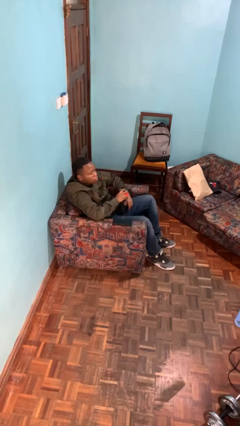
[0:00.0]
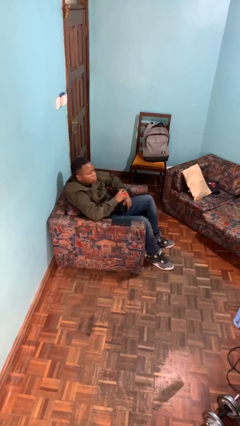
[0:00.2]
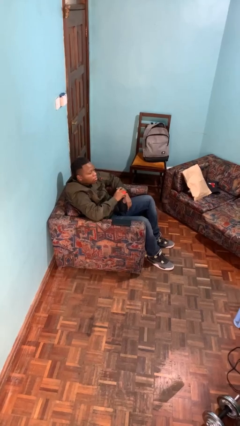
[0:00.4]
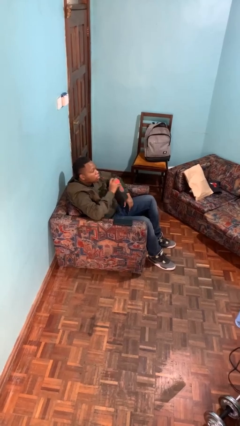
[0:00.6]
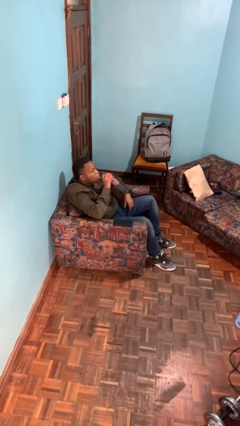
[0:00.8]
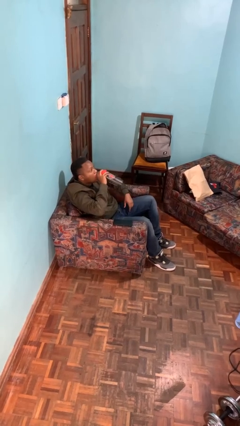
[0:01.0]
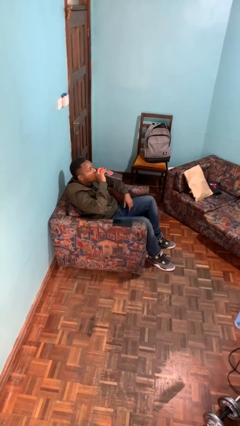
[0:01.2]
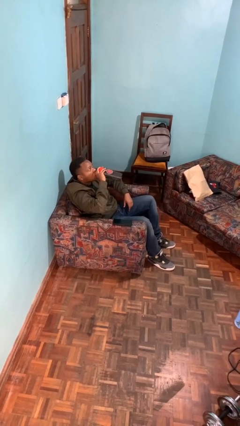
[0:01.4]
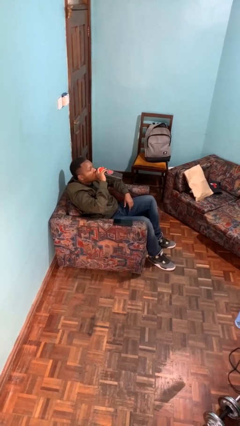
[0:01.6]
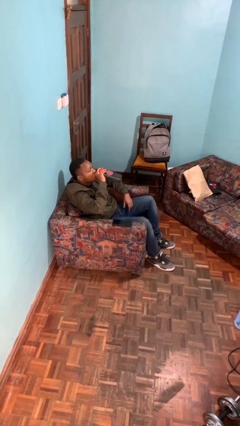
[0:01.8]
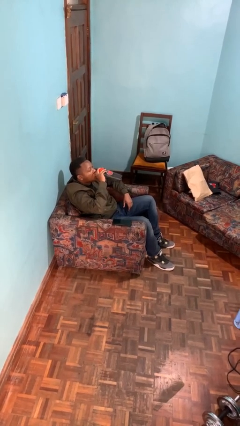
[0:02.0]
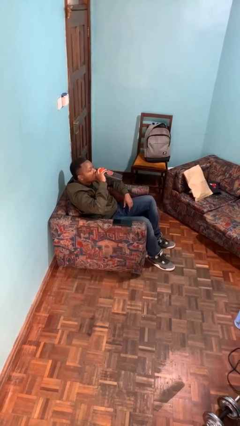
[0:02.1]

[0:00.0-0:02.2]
person drinks from bottle

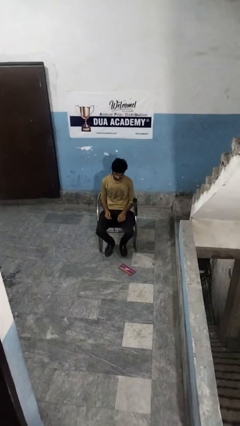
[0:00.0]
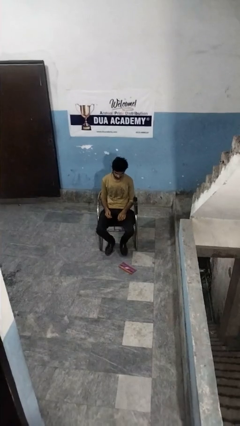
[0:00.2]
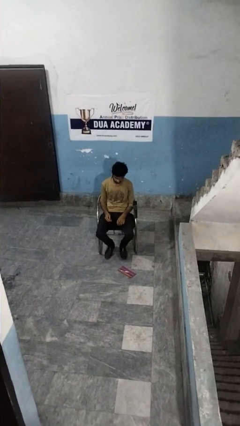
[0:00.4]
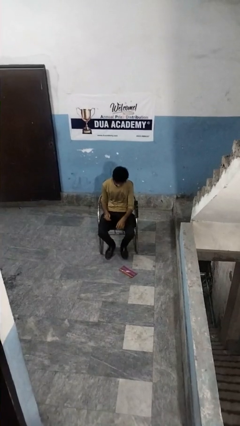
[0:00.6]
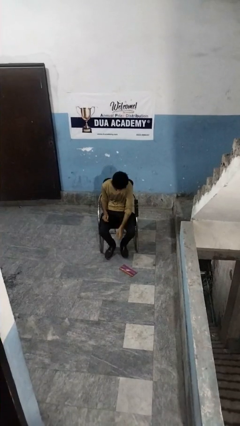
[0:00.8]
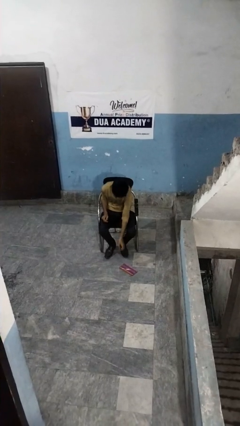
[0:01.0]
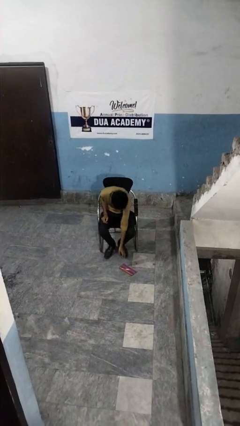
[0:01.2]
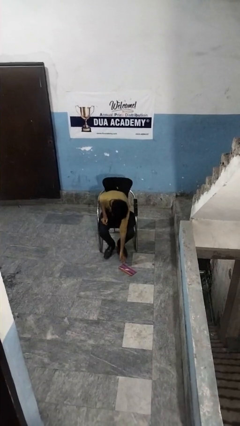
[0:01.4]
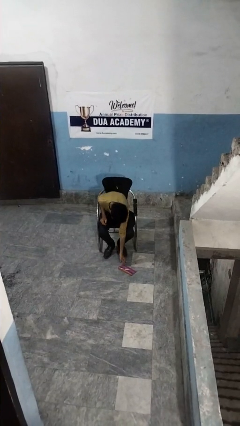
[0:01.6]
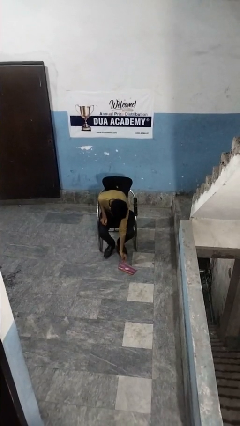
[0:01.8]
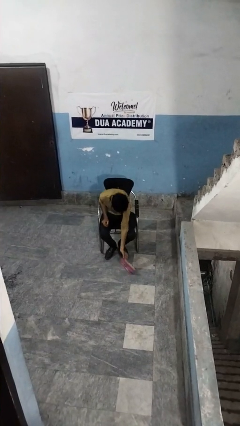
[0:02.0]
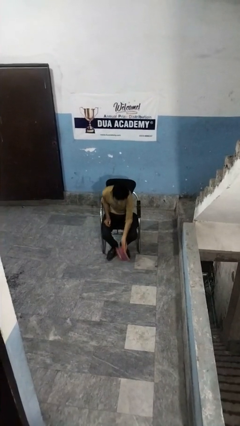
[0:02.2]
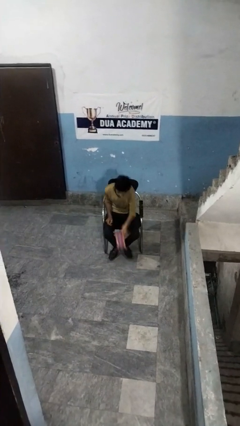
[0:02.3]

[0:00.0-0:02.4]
person picks up object from floor

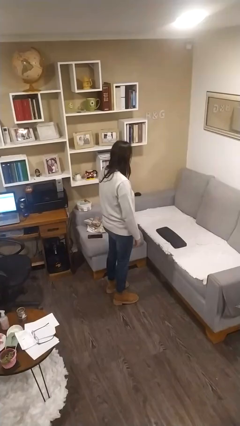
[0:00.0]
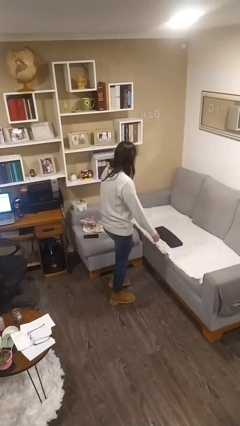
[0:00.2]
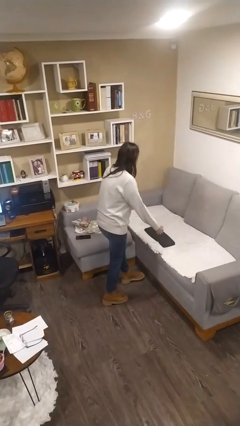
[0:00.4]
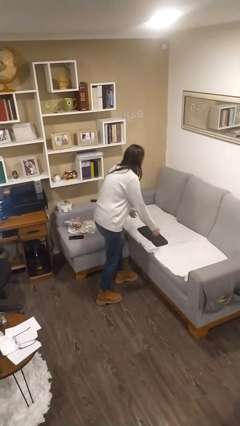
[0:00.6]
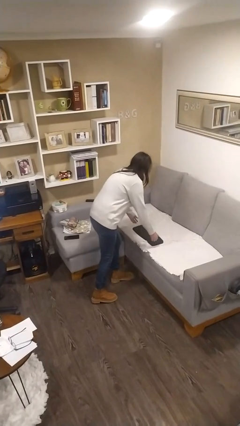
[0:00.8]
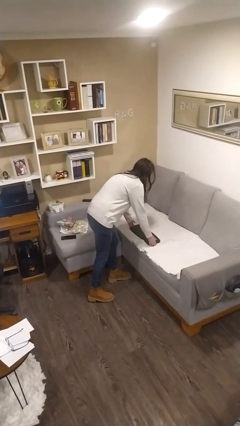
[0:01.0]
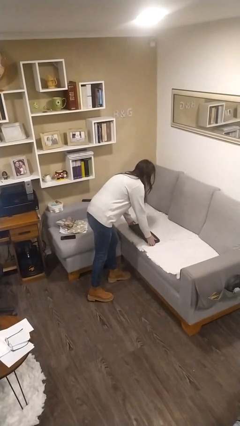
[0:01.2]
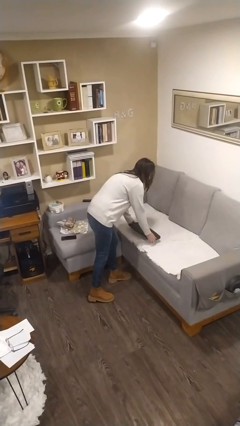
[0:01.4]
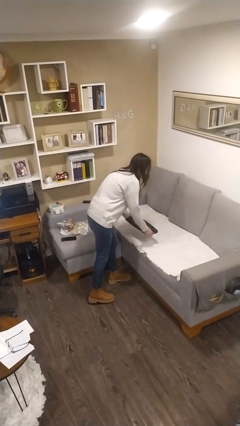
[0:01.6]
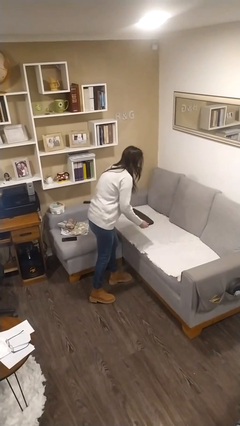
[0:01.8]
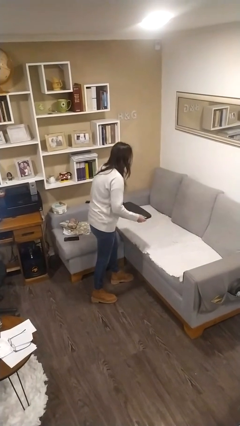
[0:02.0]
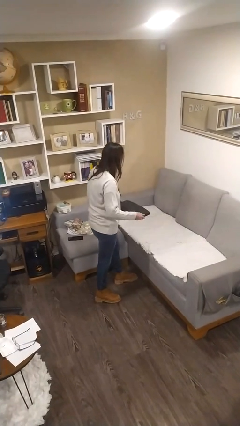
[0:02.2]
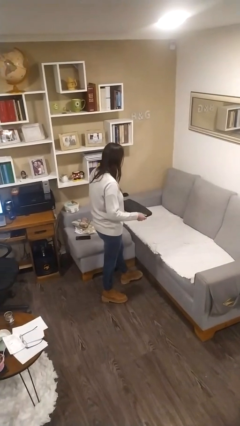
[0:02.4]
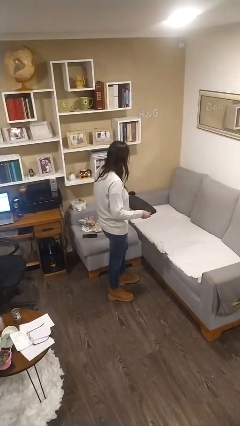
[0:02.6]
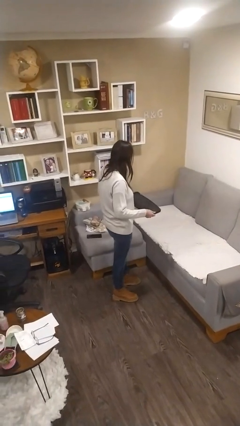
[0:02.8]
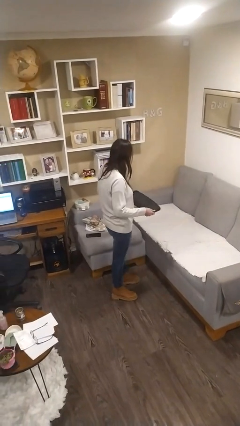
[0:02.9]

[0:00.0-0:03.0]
person picks up object from couch

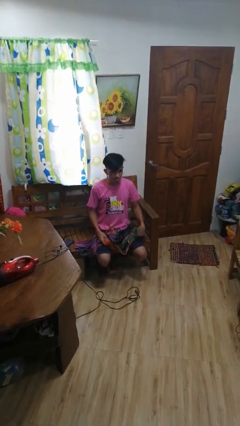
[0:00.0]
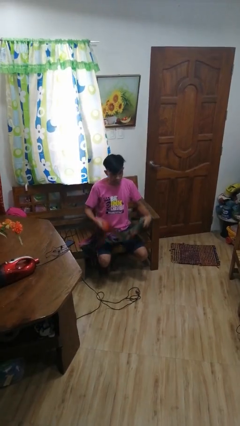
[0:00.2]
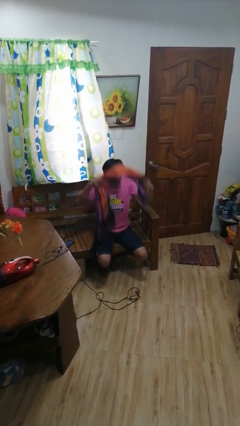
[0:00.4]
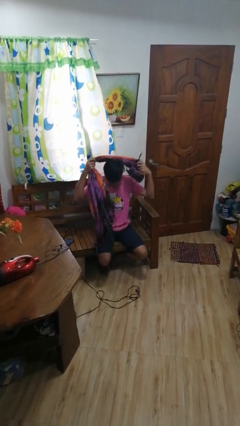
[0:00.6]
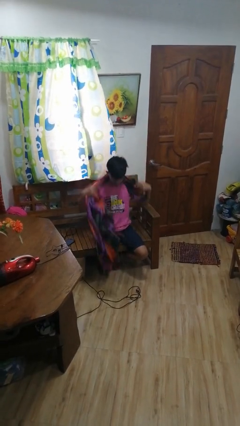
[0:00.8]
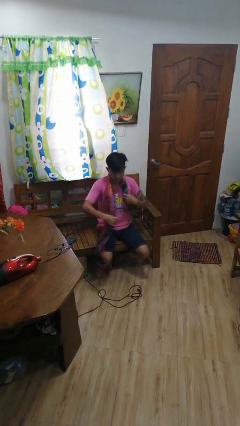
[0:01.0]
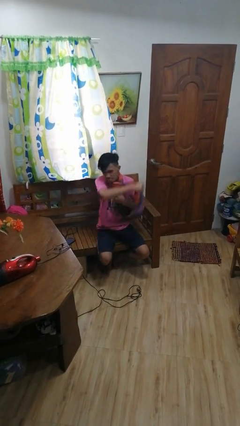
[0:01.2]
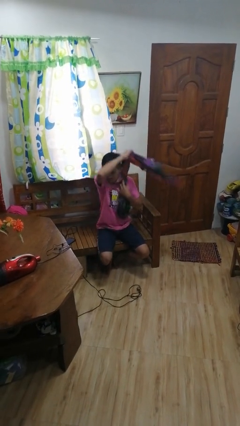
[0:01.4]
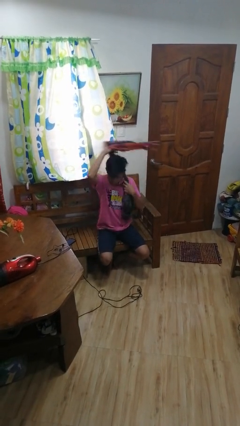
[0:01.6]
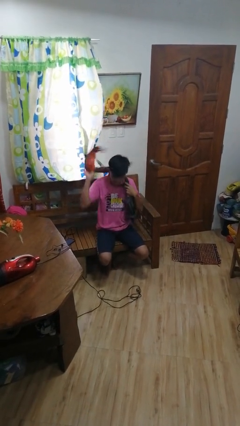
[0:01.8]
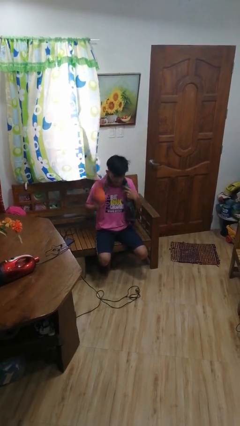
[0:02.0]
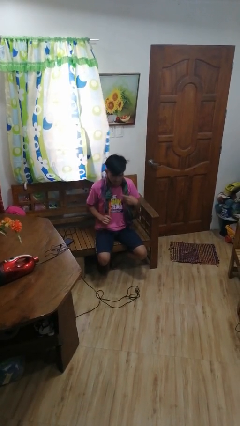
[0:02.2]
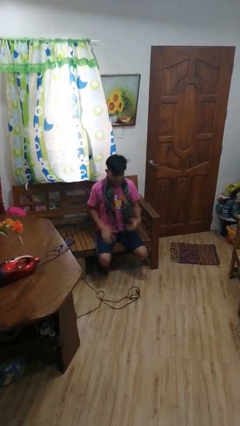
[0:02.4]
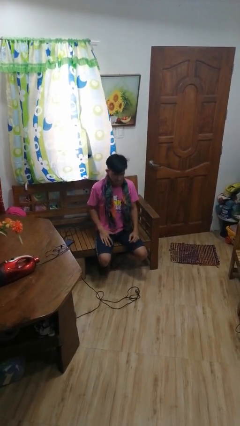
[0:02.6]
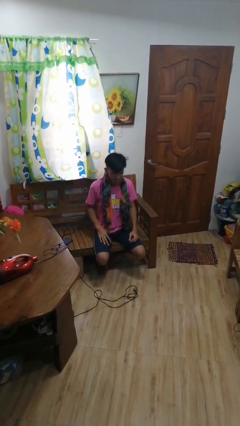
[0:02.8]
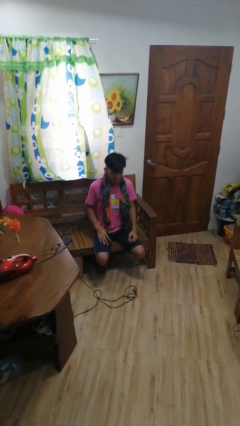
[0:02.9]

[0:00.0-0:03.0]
person puts on scarf

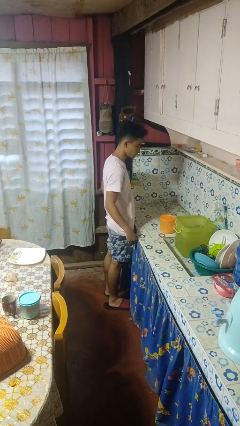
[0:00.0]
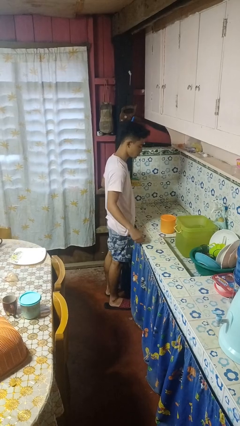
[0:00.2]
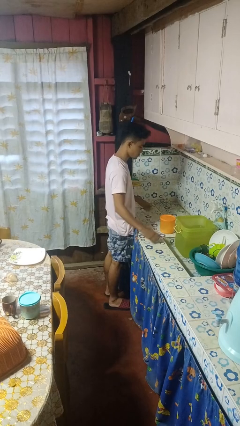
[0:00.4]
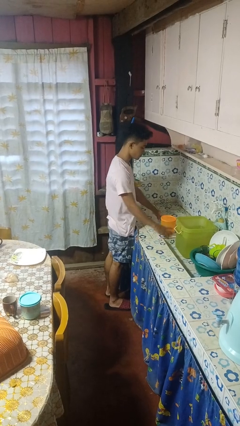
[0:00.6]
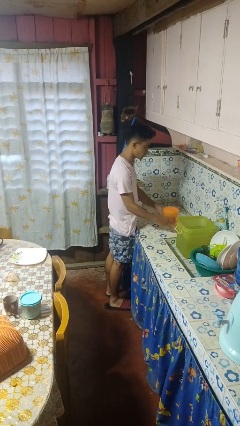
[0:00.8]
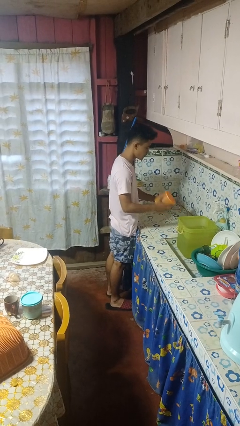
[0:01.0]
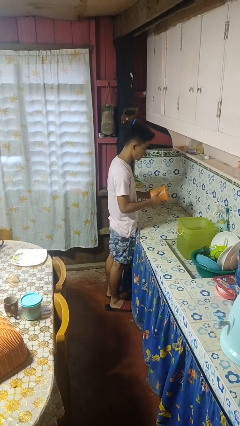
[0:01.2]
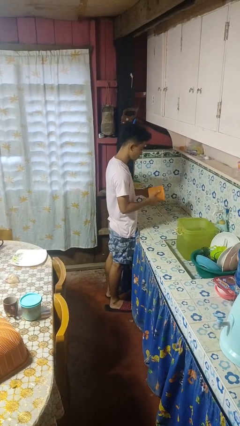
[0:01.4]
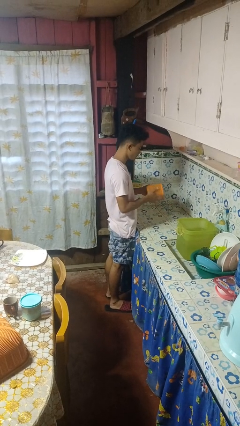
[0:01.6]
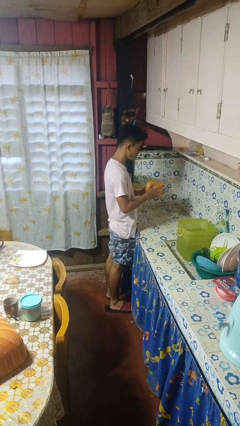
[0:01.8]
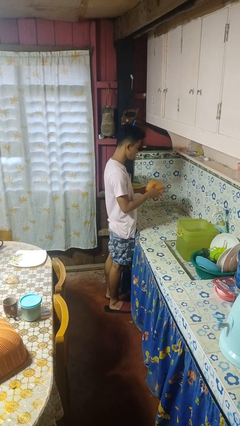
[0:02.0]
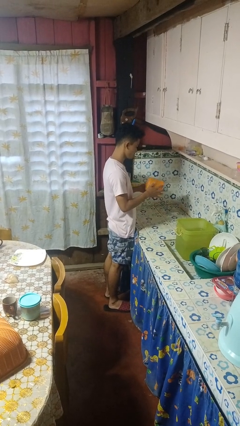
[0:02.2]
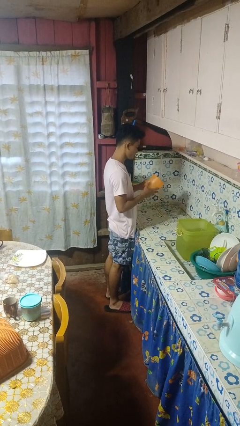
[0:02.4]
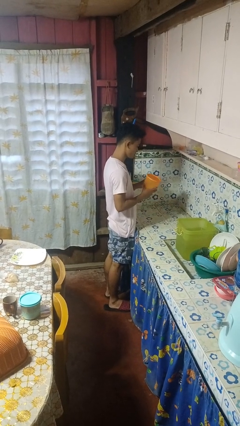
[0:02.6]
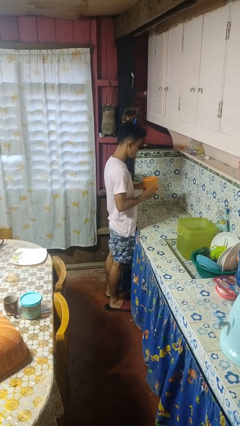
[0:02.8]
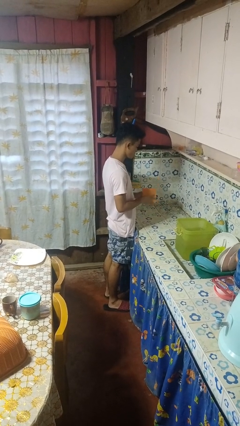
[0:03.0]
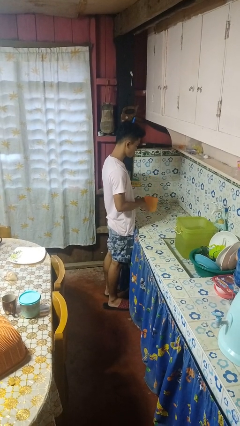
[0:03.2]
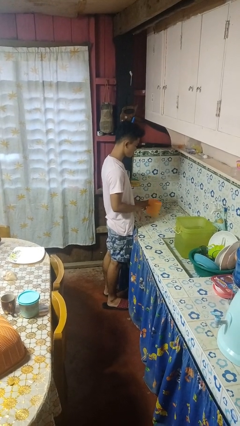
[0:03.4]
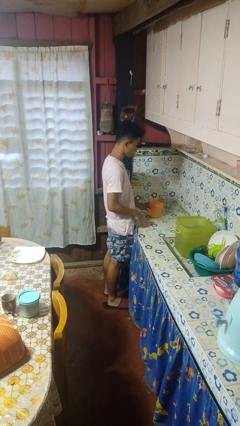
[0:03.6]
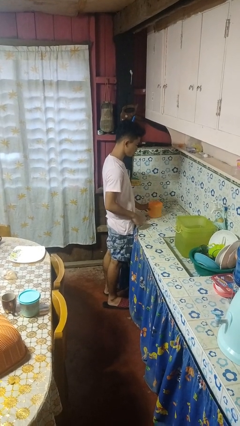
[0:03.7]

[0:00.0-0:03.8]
person picks up object from countertop

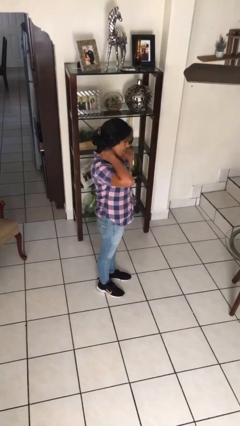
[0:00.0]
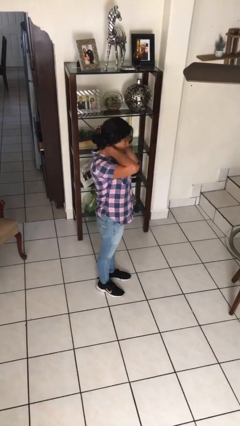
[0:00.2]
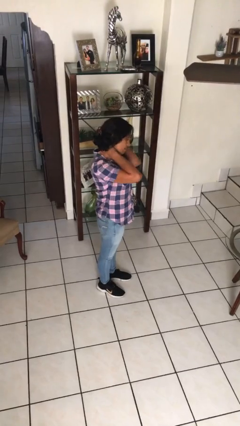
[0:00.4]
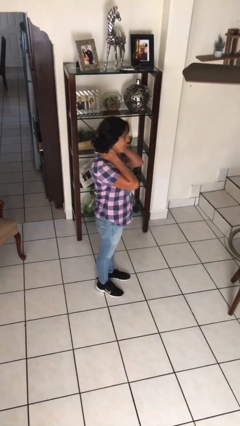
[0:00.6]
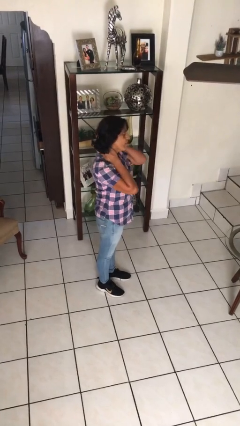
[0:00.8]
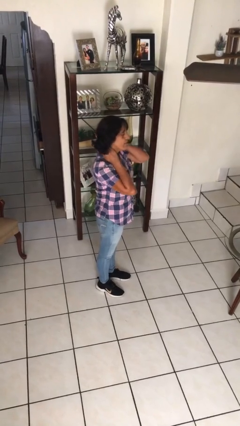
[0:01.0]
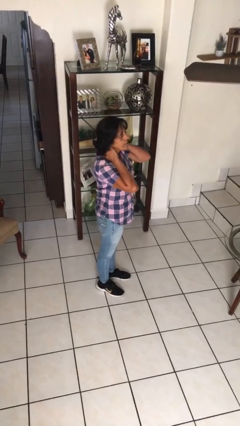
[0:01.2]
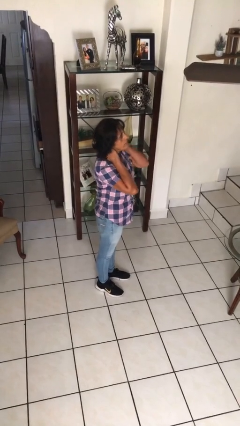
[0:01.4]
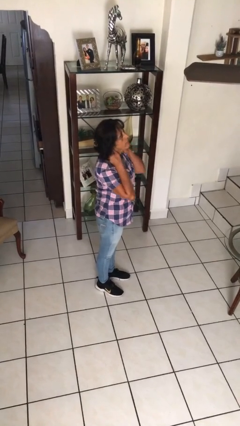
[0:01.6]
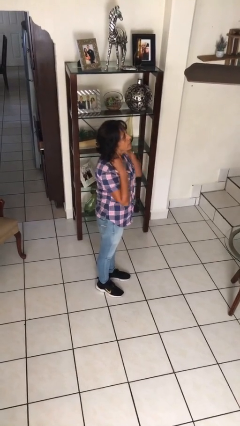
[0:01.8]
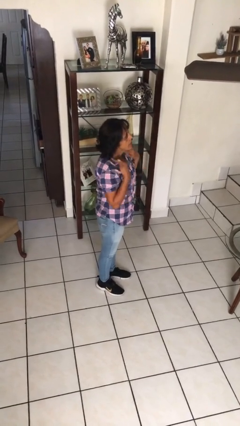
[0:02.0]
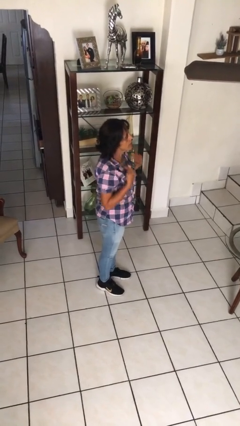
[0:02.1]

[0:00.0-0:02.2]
person rubs neck

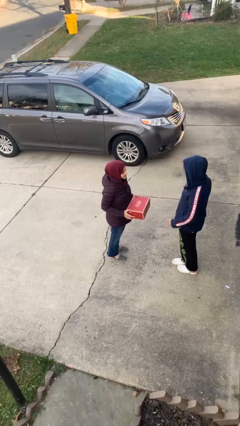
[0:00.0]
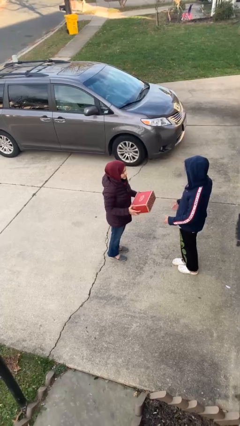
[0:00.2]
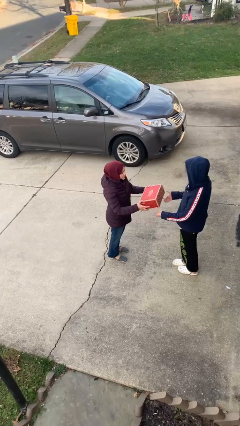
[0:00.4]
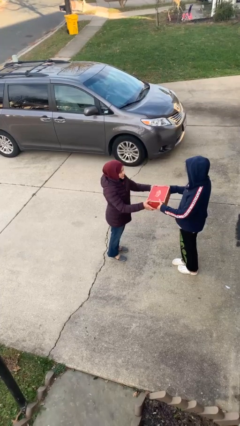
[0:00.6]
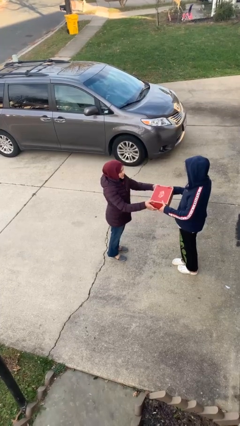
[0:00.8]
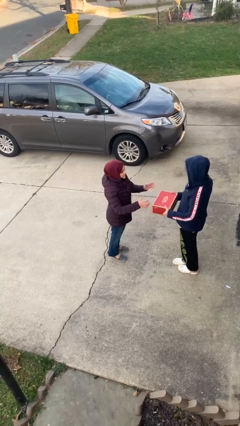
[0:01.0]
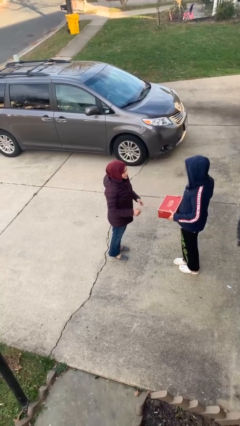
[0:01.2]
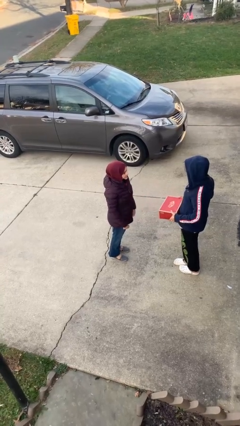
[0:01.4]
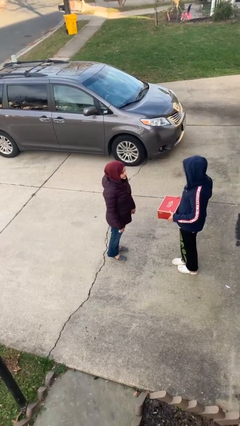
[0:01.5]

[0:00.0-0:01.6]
person transfers object to person
